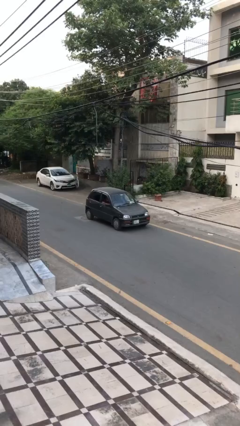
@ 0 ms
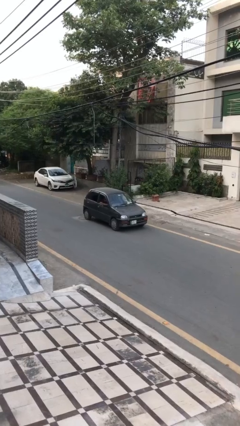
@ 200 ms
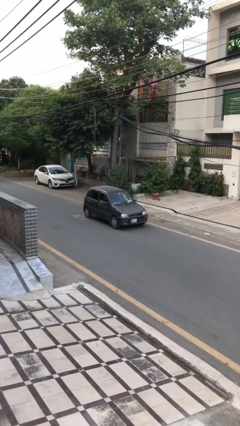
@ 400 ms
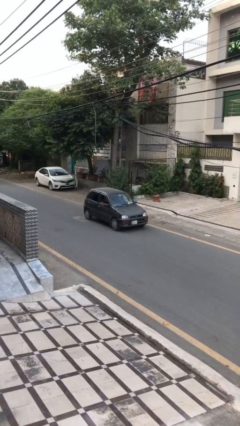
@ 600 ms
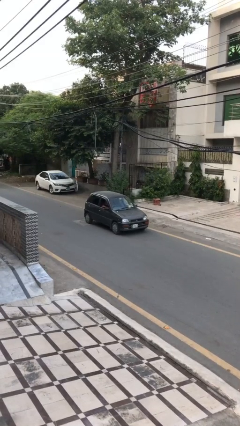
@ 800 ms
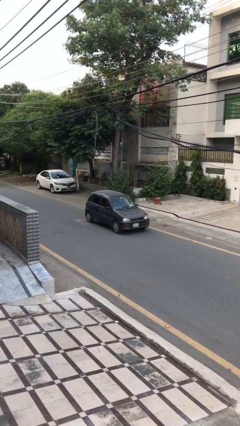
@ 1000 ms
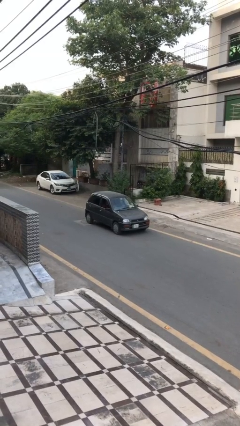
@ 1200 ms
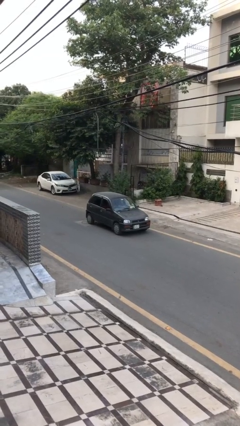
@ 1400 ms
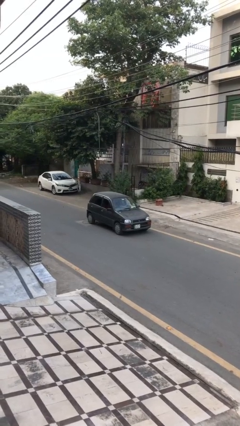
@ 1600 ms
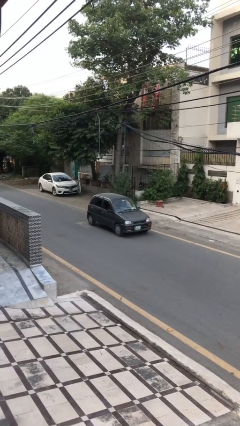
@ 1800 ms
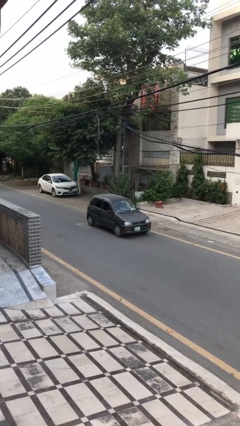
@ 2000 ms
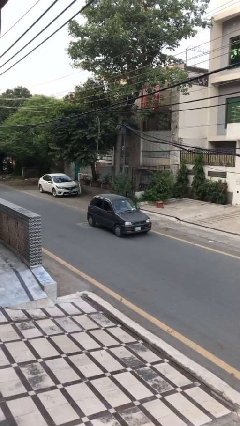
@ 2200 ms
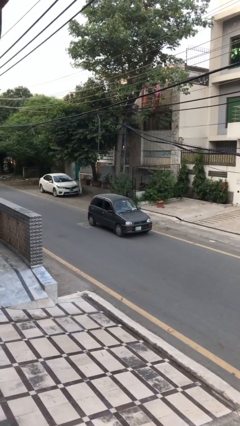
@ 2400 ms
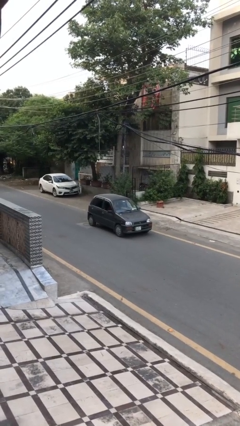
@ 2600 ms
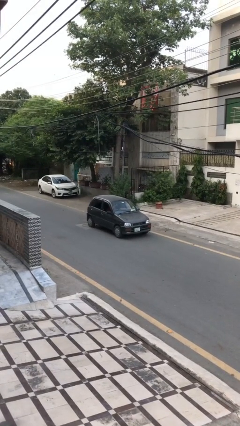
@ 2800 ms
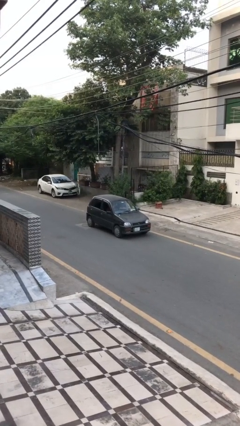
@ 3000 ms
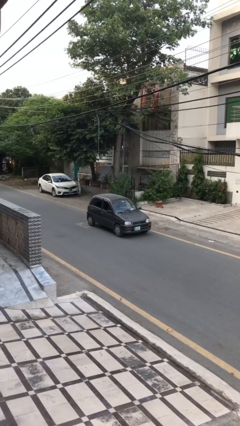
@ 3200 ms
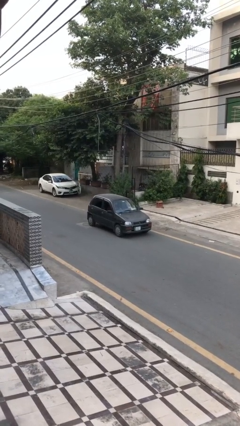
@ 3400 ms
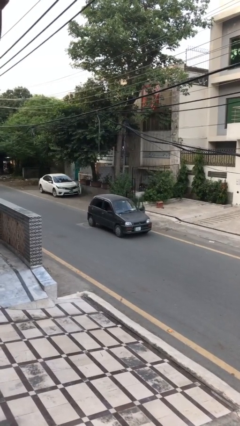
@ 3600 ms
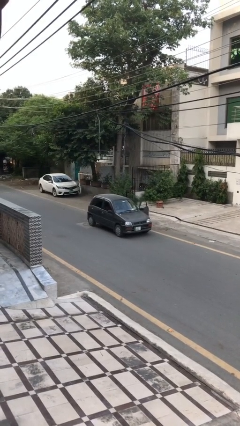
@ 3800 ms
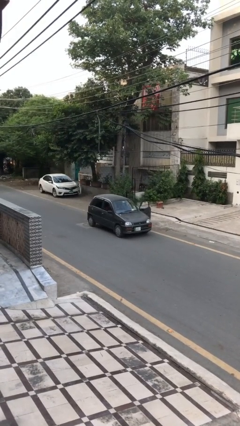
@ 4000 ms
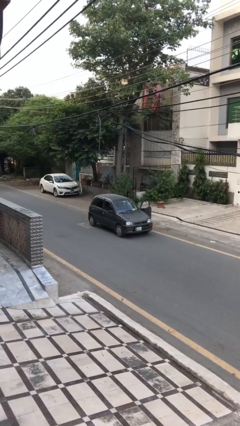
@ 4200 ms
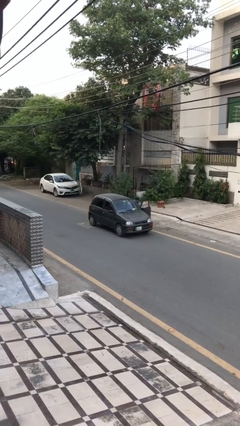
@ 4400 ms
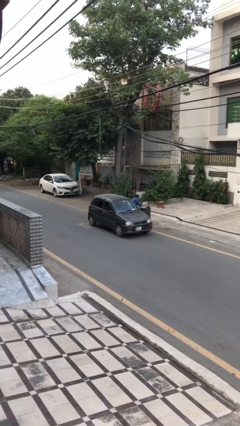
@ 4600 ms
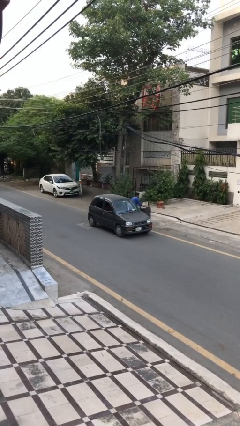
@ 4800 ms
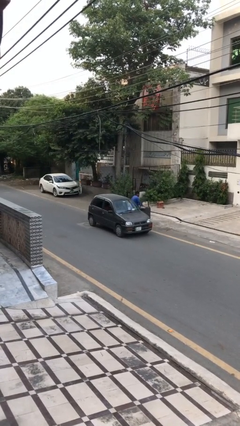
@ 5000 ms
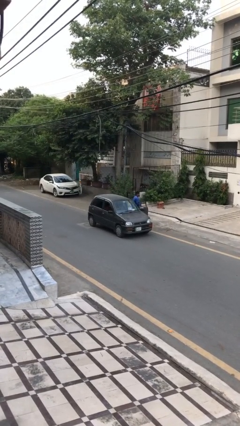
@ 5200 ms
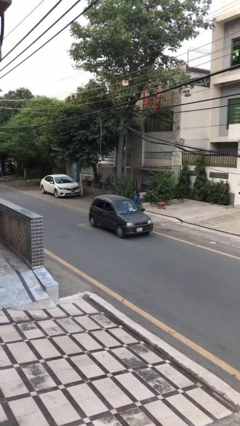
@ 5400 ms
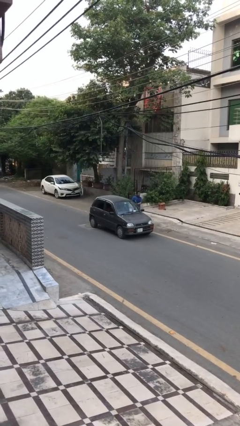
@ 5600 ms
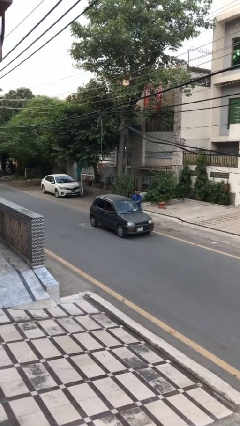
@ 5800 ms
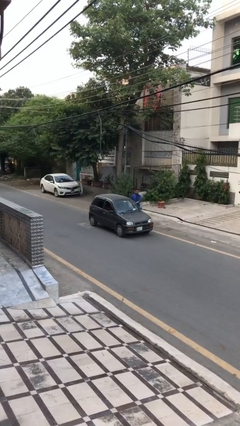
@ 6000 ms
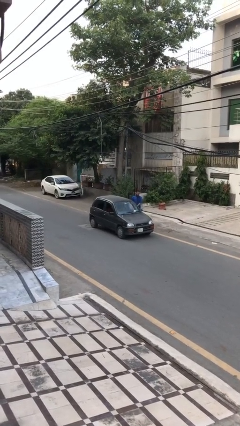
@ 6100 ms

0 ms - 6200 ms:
car drops off person

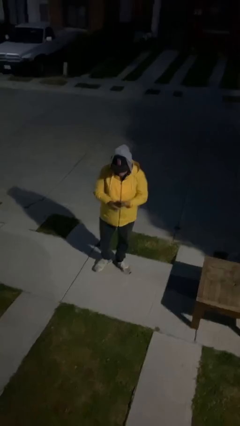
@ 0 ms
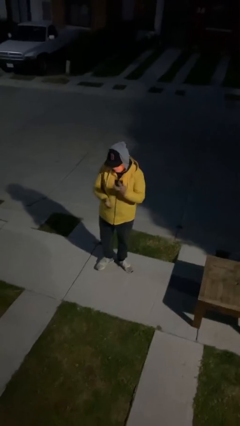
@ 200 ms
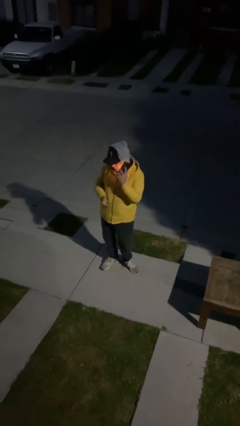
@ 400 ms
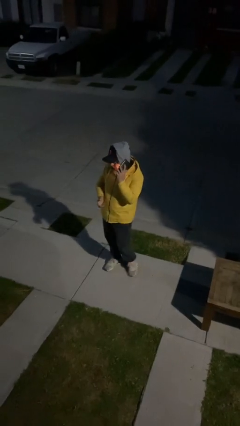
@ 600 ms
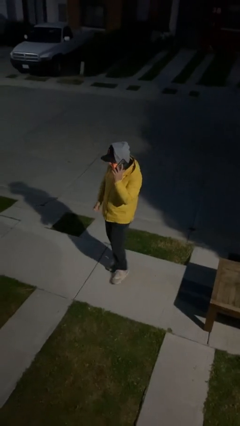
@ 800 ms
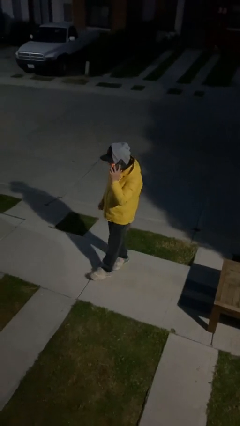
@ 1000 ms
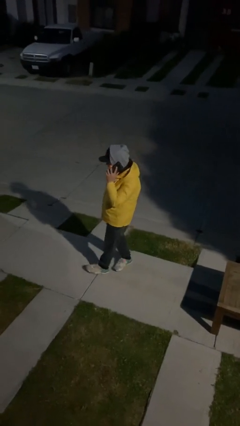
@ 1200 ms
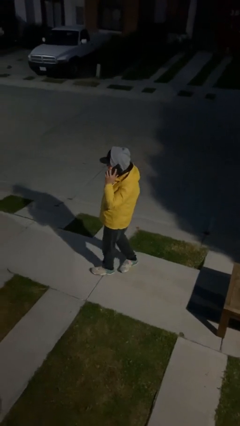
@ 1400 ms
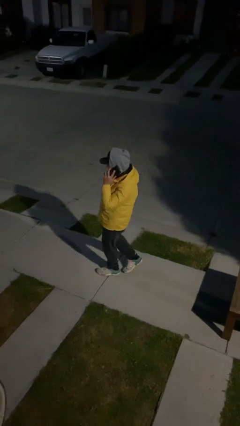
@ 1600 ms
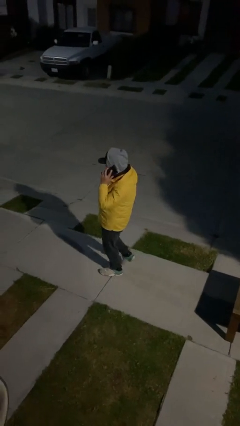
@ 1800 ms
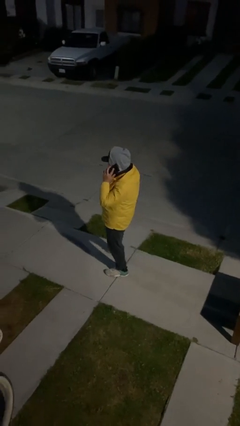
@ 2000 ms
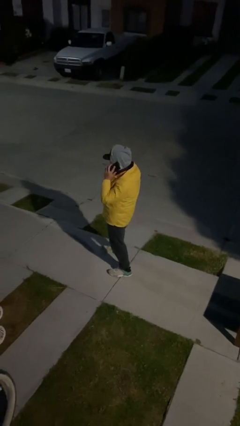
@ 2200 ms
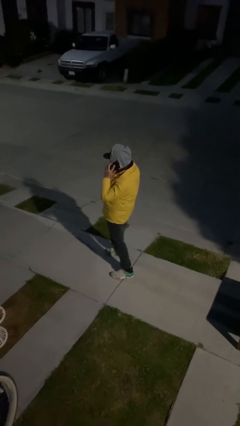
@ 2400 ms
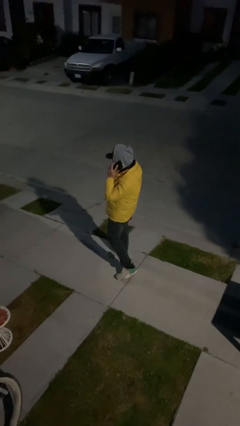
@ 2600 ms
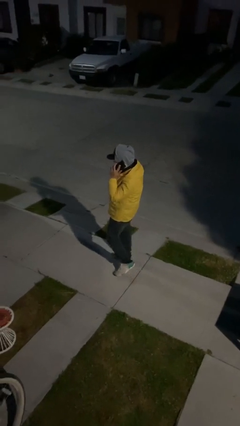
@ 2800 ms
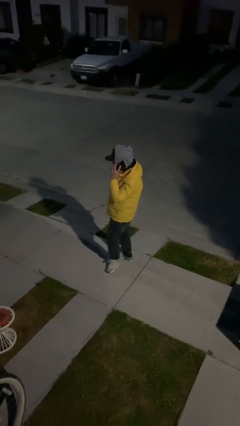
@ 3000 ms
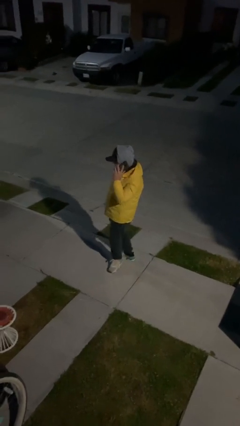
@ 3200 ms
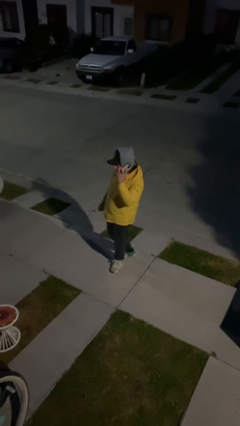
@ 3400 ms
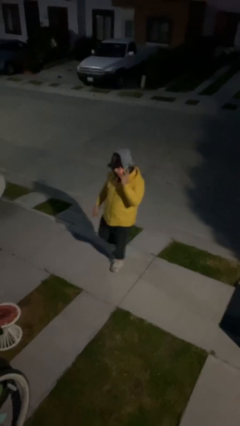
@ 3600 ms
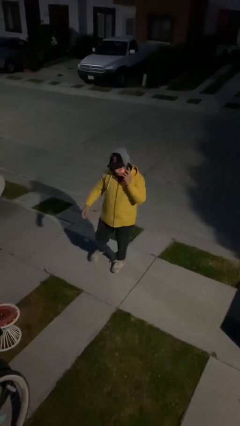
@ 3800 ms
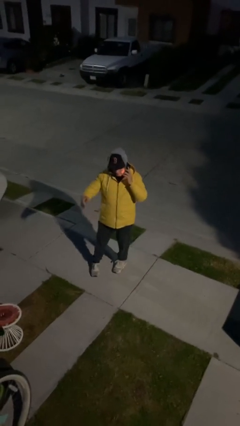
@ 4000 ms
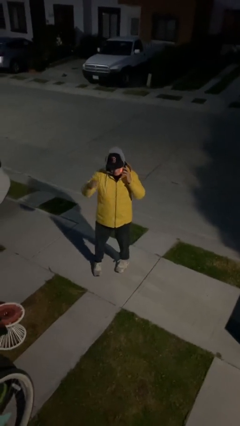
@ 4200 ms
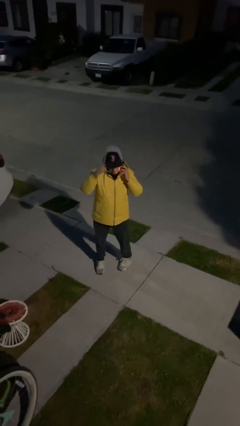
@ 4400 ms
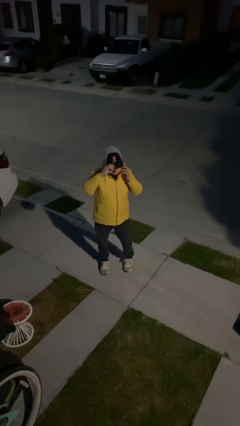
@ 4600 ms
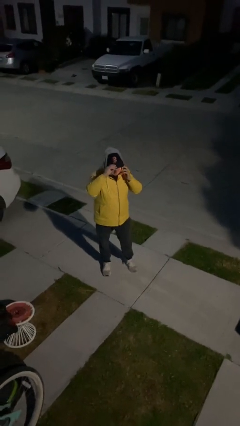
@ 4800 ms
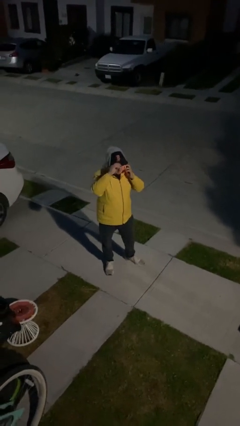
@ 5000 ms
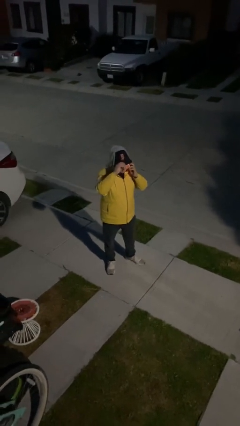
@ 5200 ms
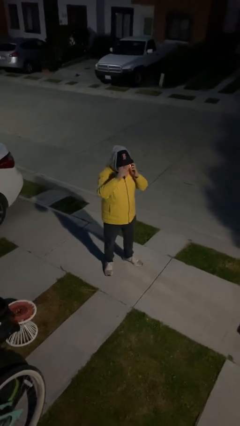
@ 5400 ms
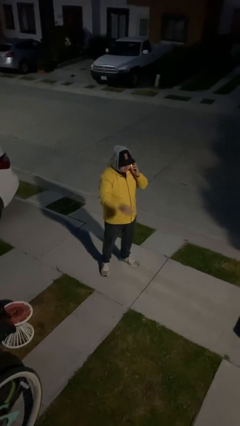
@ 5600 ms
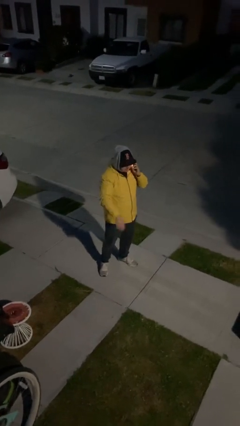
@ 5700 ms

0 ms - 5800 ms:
person talks on phone

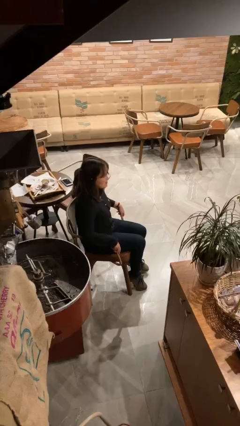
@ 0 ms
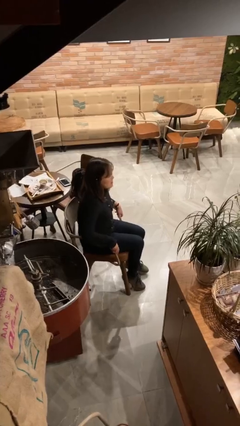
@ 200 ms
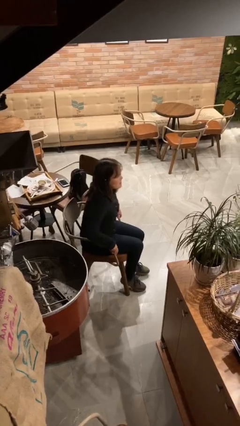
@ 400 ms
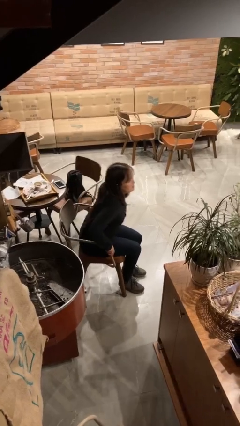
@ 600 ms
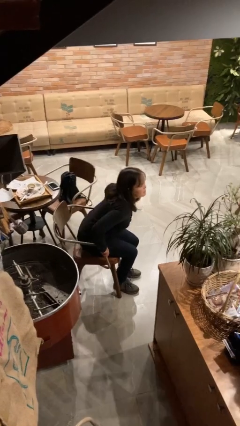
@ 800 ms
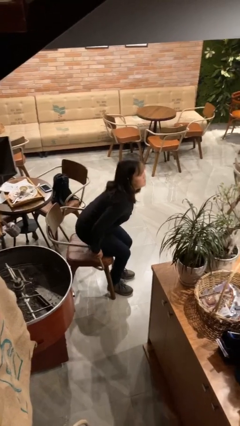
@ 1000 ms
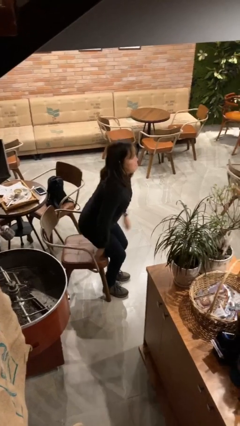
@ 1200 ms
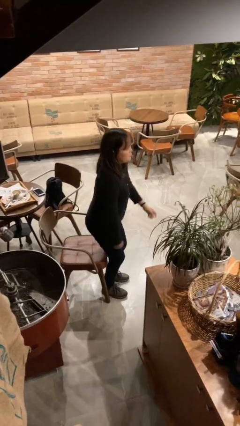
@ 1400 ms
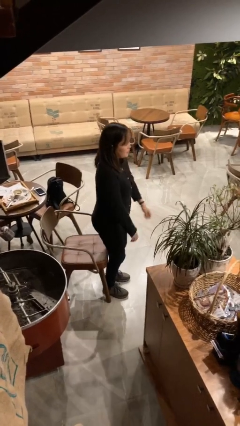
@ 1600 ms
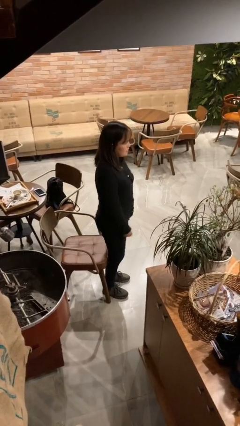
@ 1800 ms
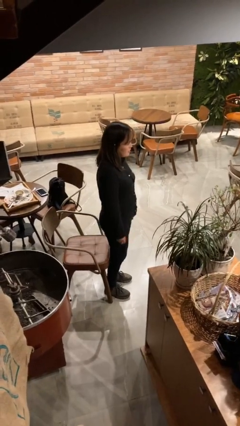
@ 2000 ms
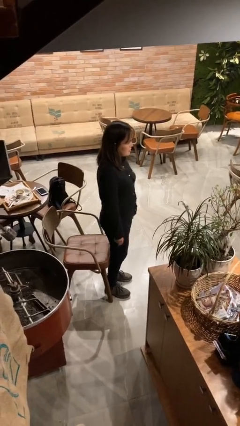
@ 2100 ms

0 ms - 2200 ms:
person stands up

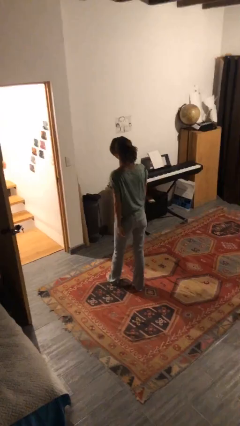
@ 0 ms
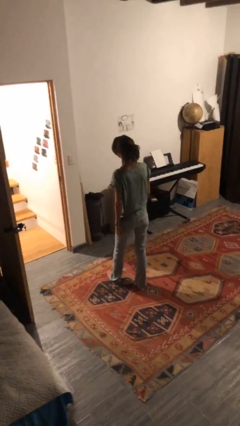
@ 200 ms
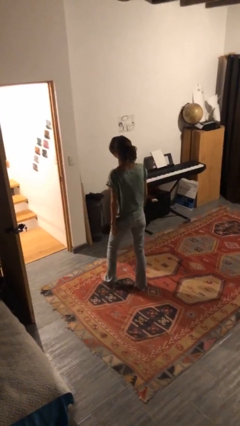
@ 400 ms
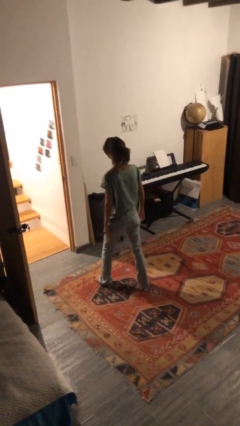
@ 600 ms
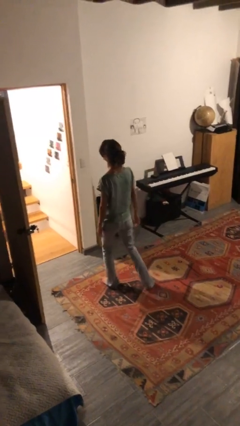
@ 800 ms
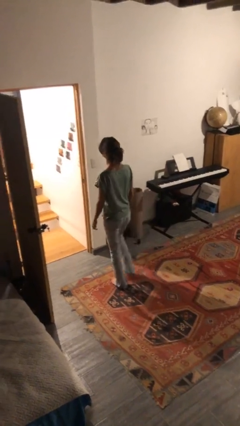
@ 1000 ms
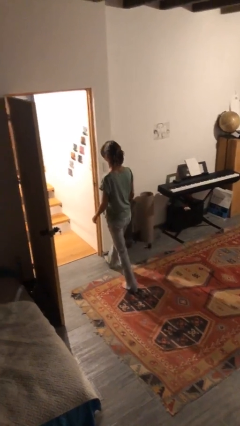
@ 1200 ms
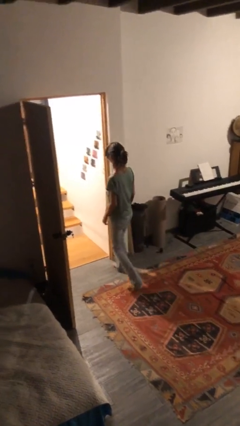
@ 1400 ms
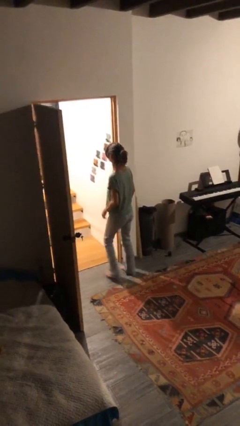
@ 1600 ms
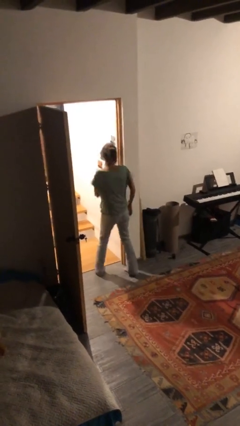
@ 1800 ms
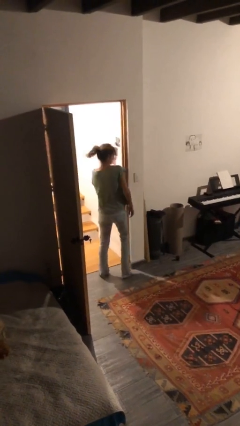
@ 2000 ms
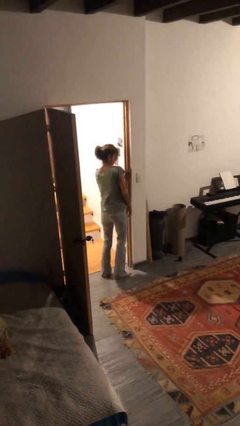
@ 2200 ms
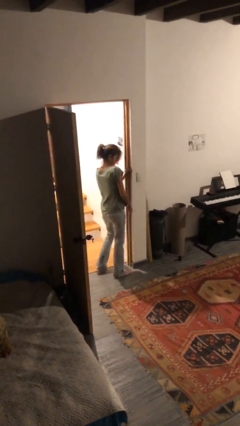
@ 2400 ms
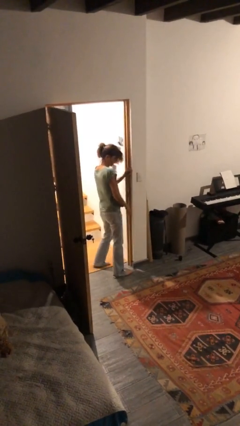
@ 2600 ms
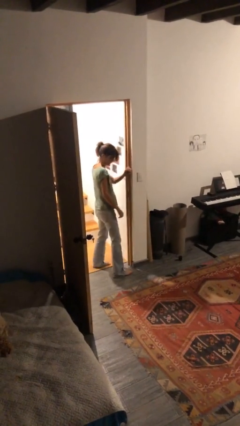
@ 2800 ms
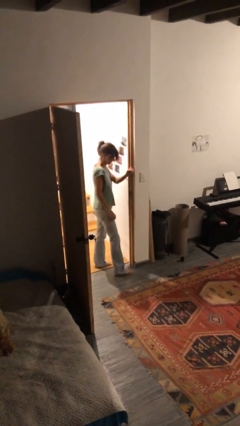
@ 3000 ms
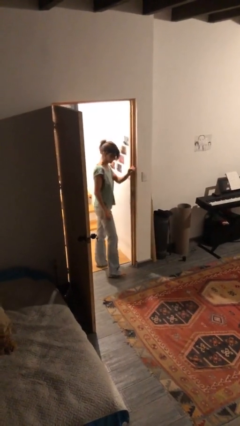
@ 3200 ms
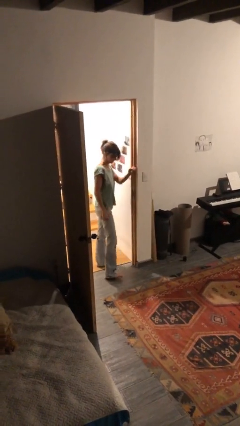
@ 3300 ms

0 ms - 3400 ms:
person bumps into wall
